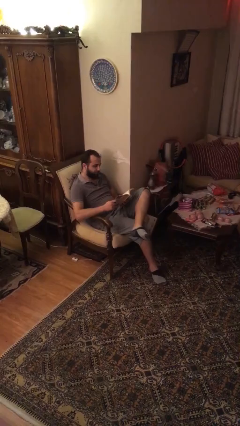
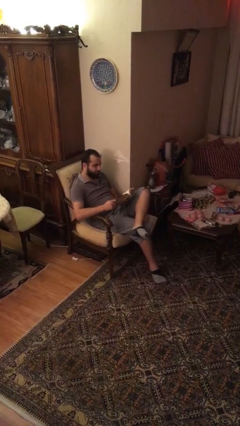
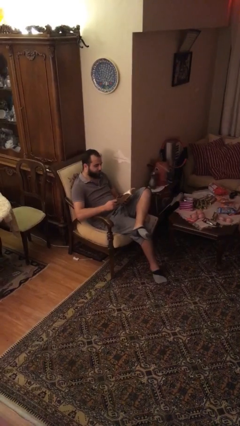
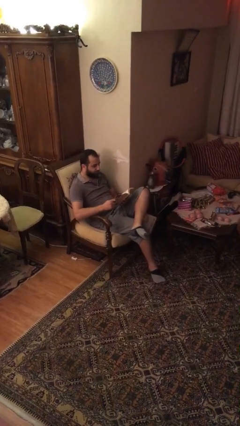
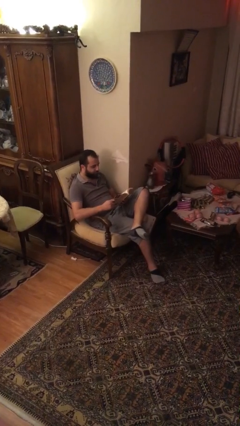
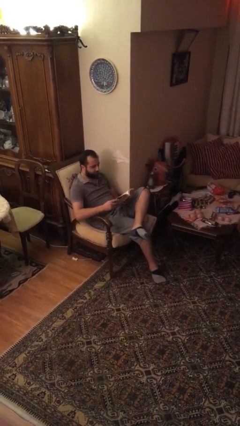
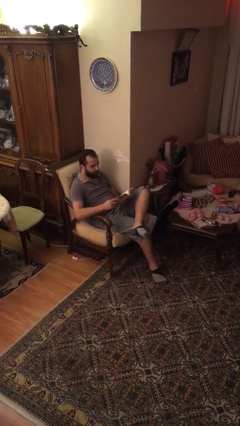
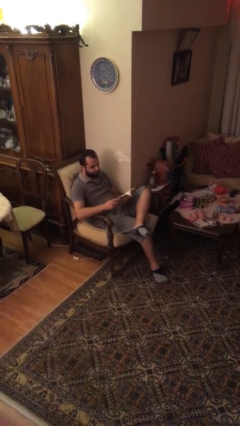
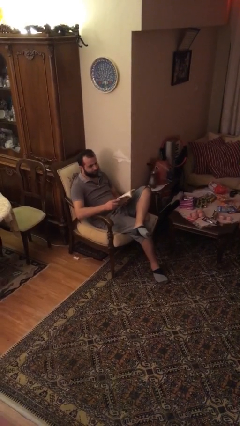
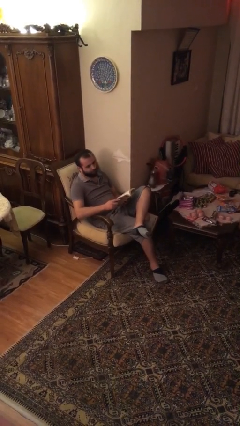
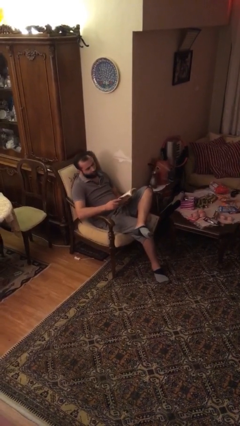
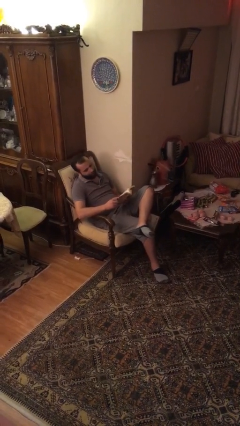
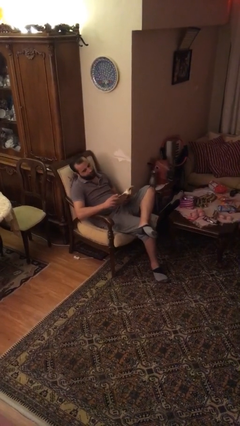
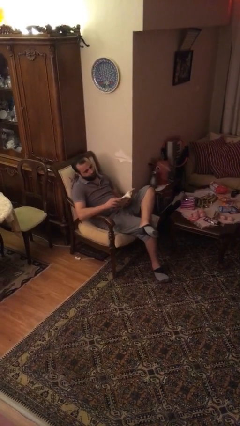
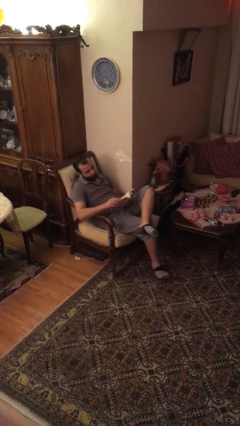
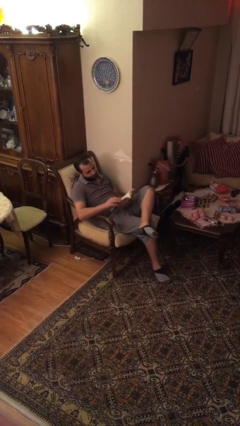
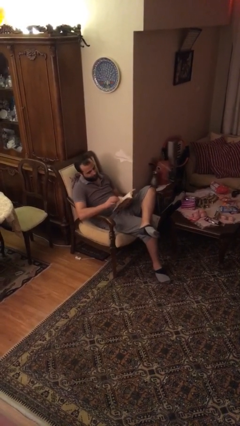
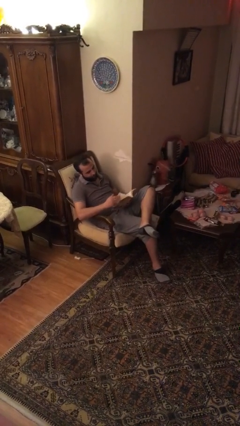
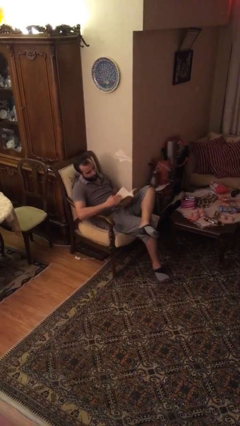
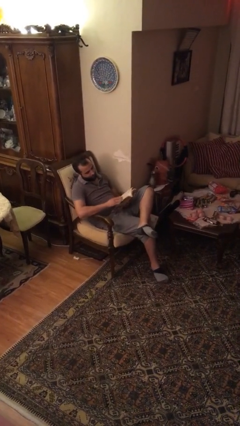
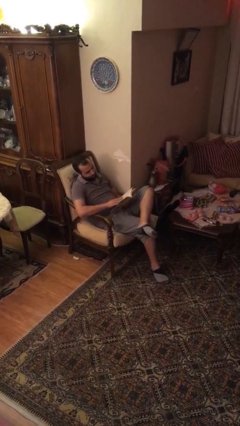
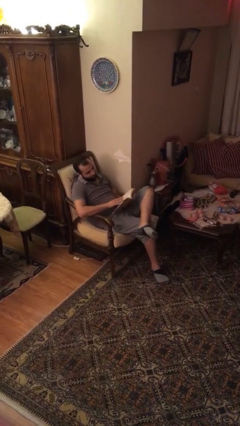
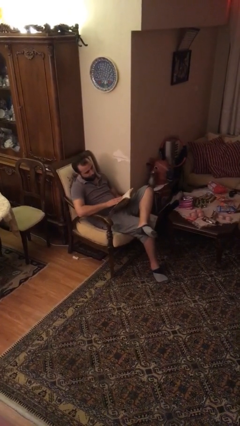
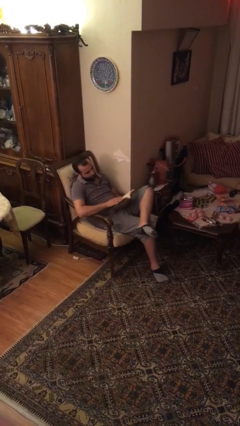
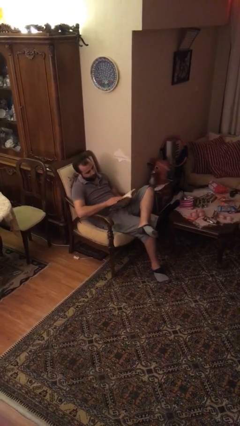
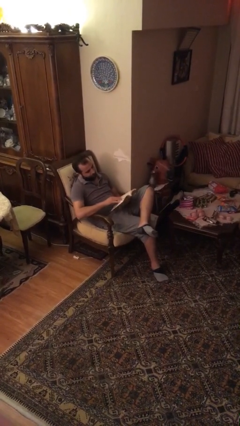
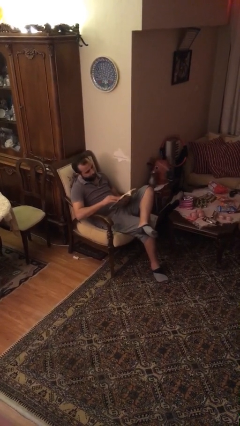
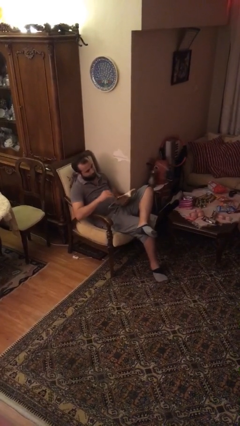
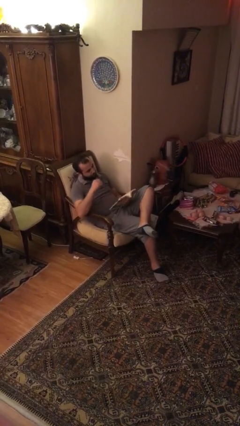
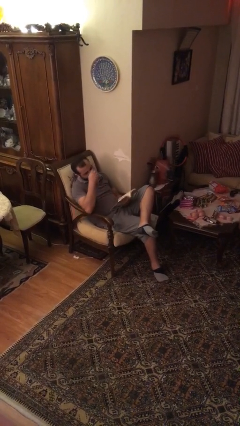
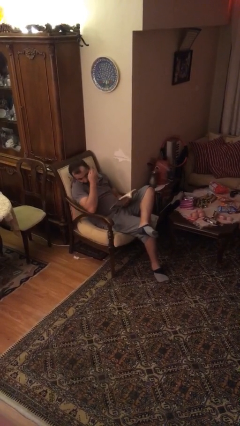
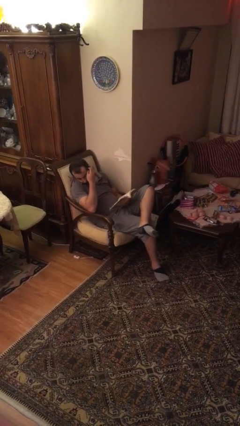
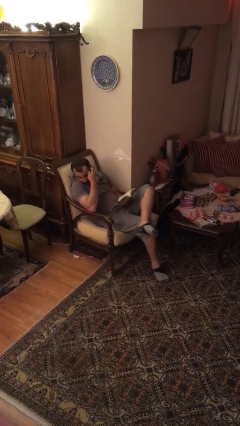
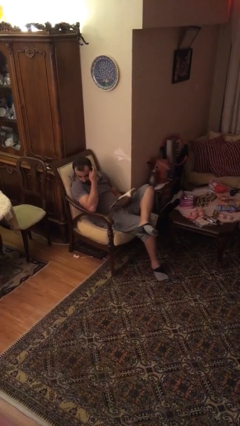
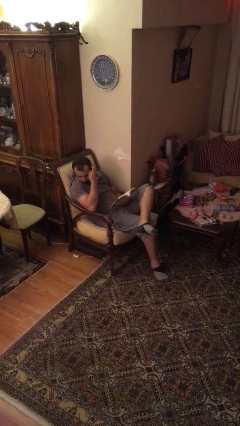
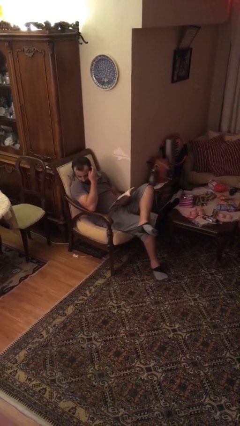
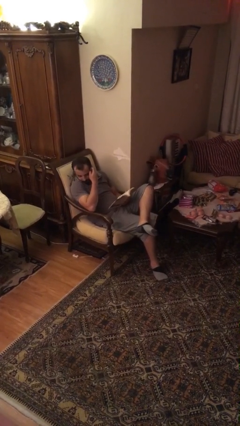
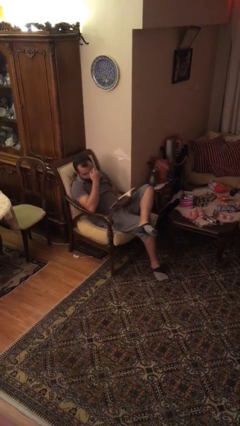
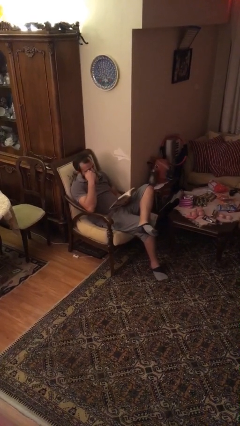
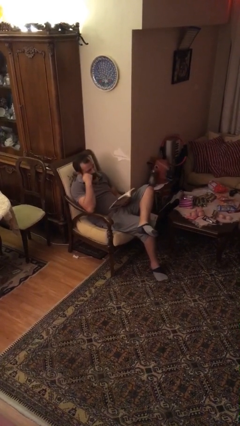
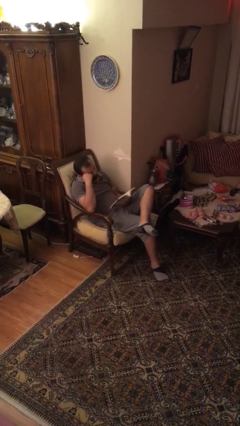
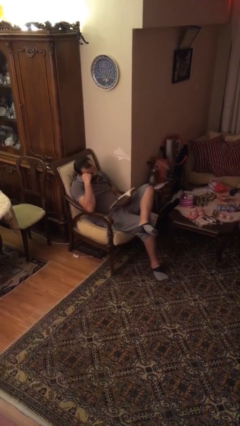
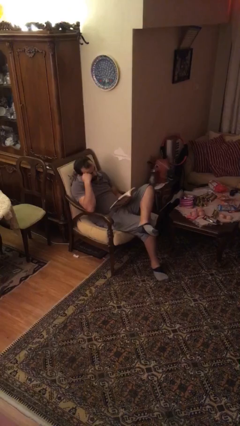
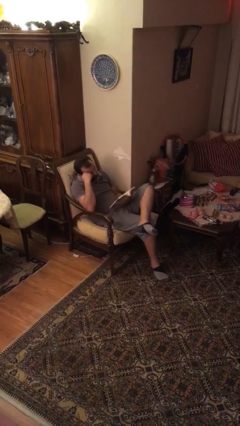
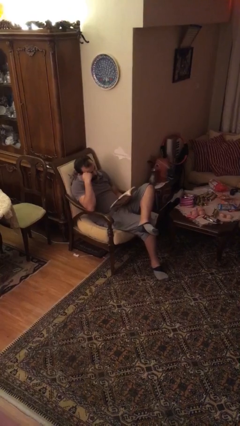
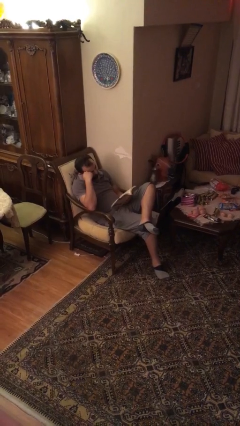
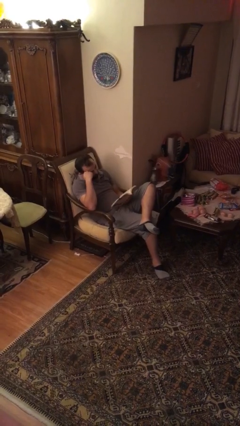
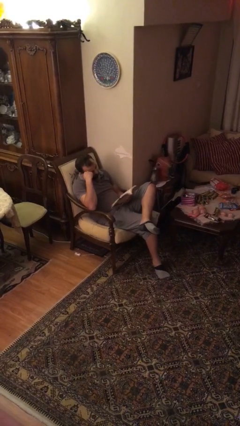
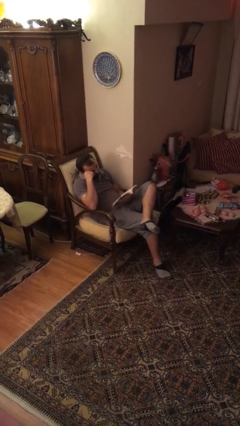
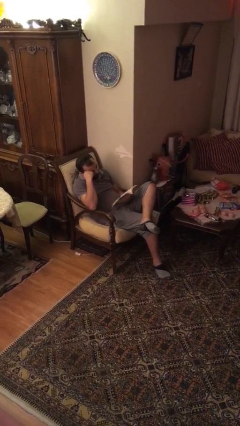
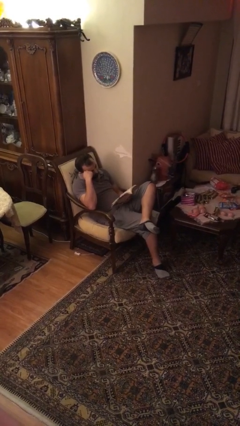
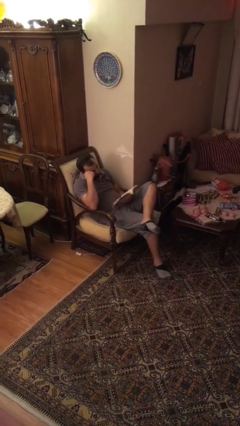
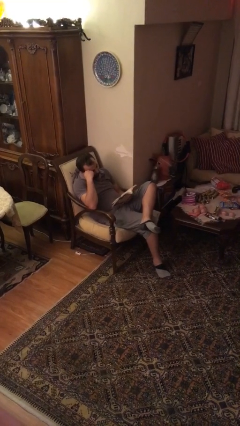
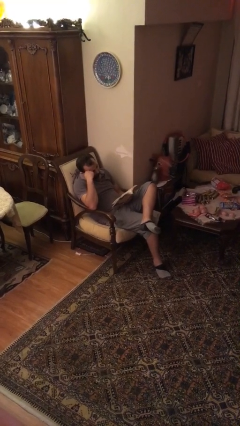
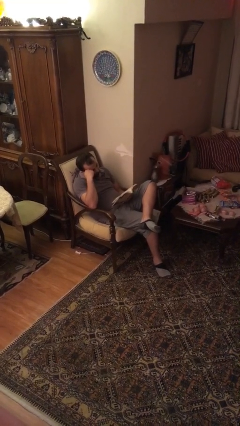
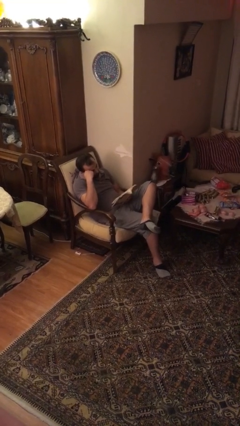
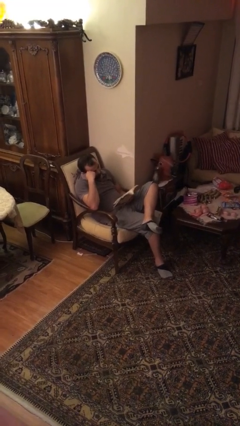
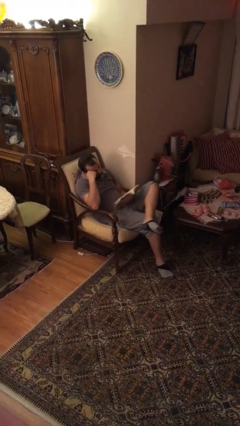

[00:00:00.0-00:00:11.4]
person reads document

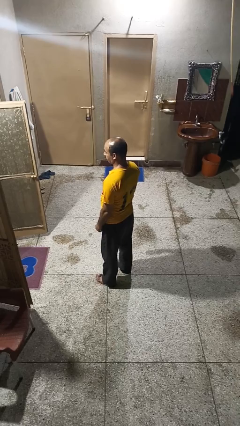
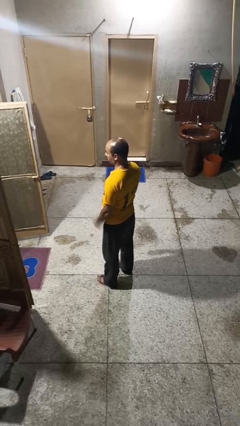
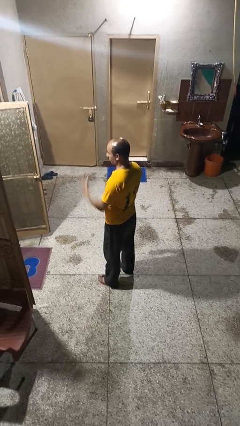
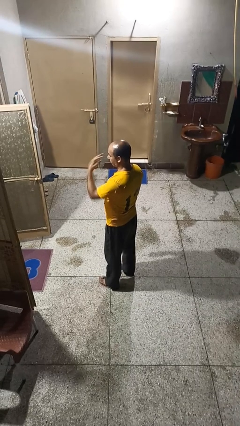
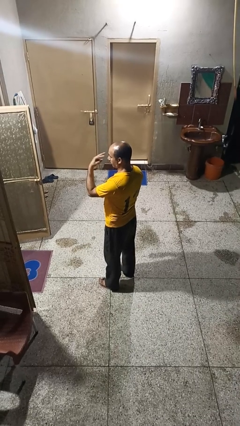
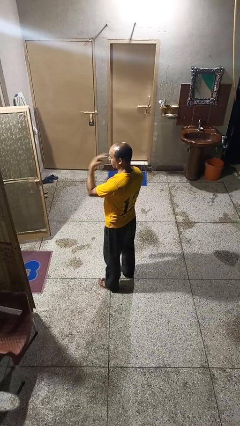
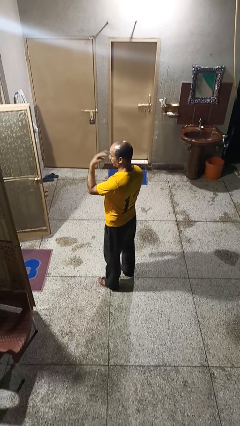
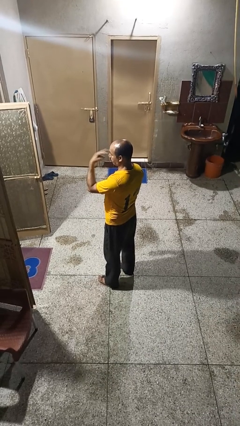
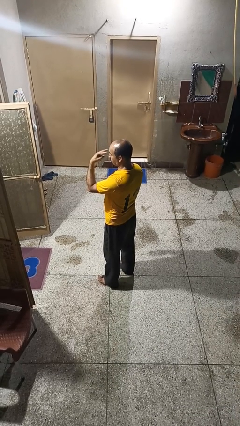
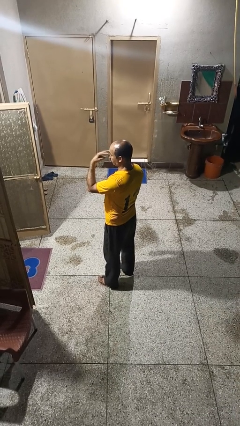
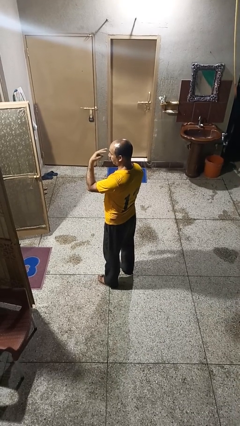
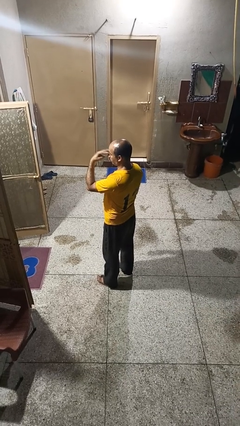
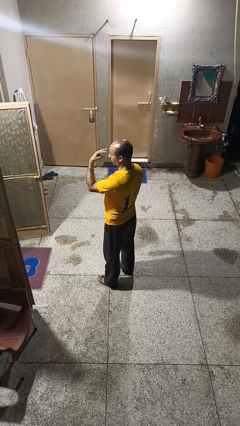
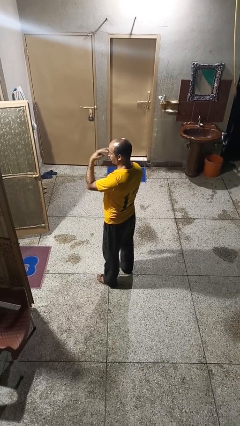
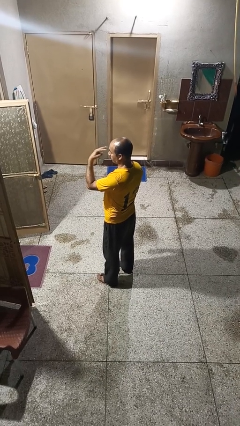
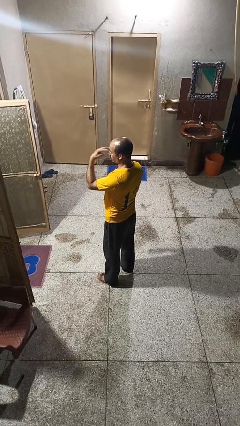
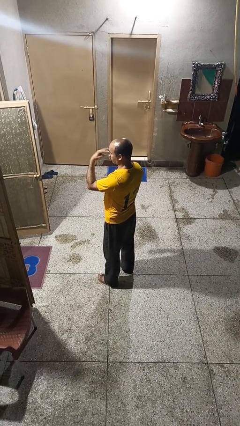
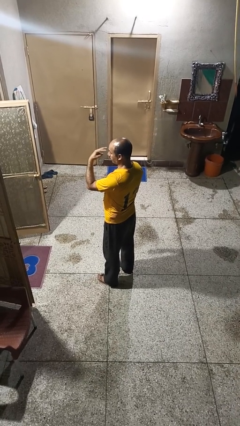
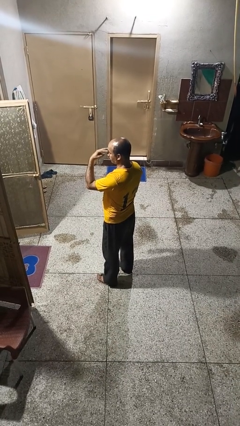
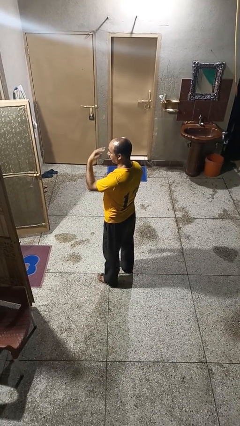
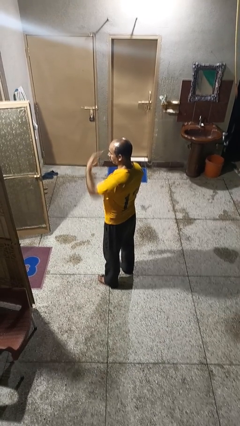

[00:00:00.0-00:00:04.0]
person gestures watch closely

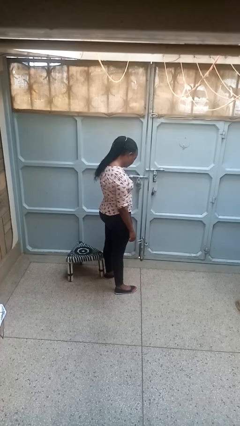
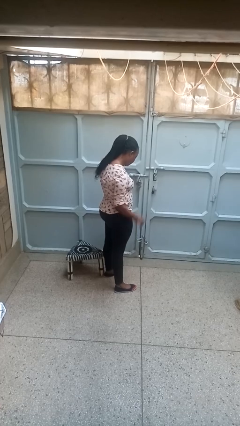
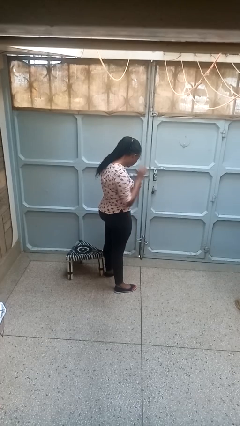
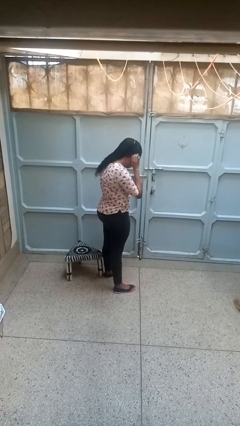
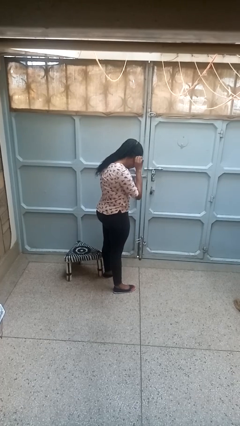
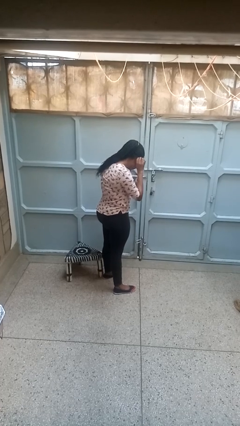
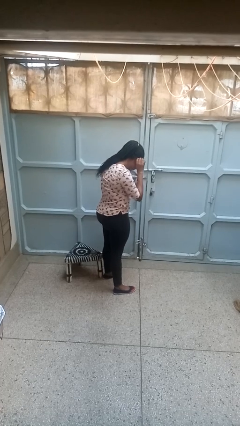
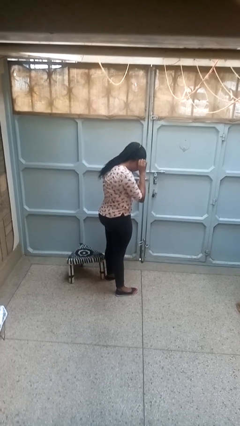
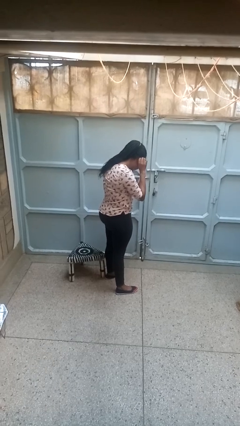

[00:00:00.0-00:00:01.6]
person gestures listen closely

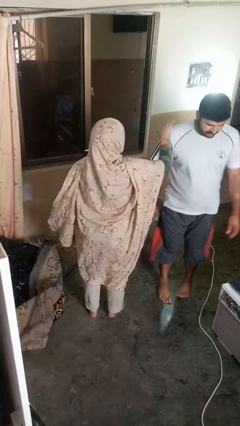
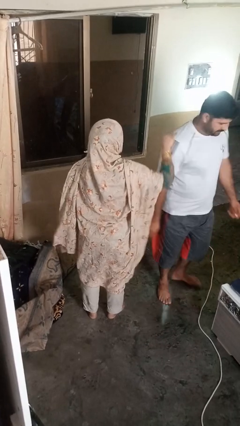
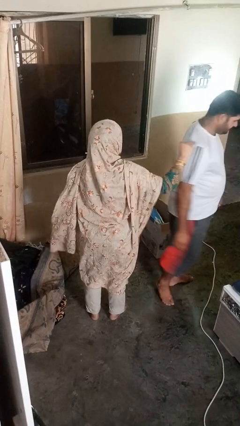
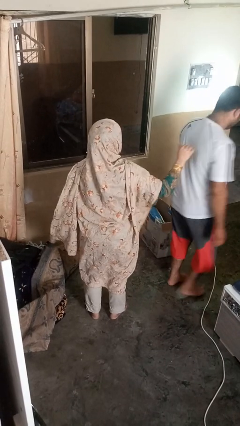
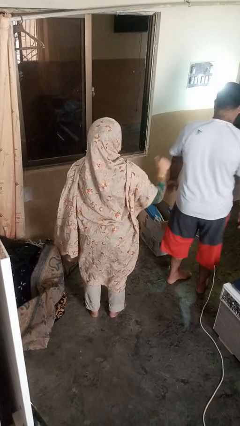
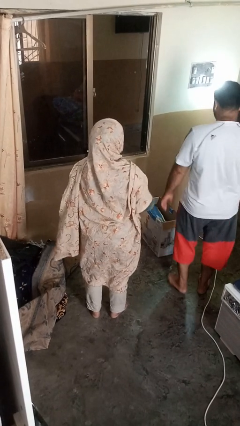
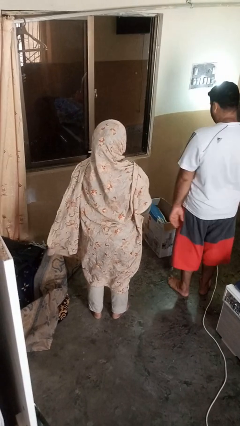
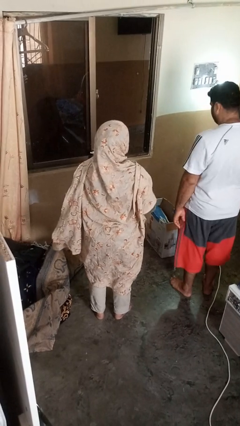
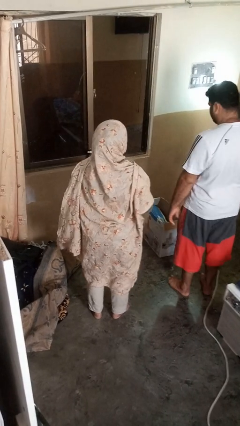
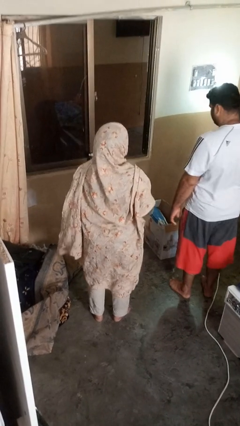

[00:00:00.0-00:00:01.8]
person spins person around
